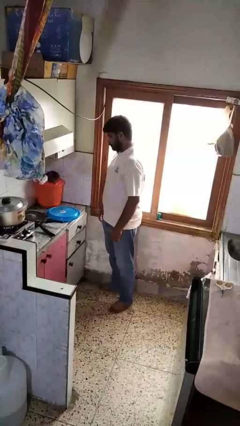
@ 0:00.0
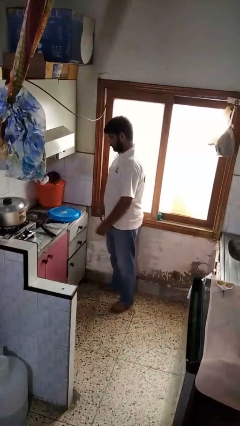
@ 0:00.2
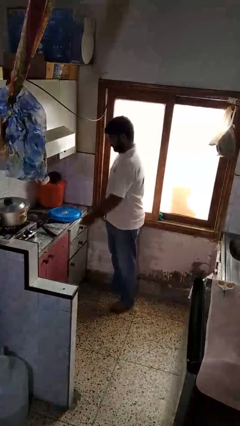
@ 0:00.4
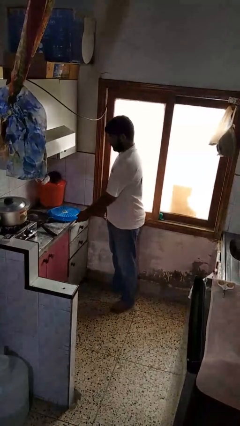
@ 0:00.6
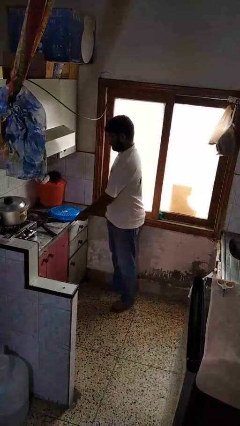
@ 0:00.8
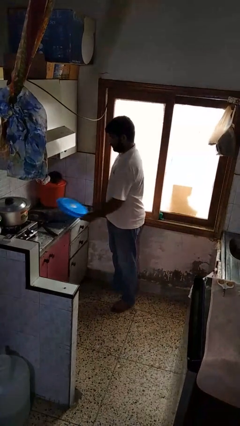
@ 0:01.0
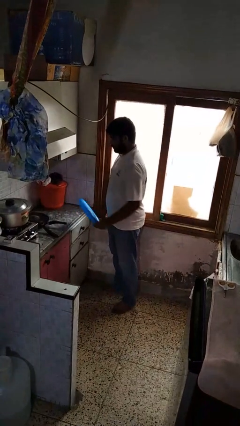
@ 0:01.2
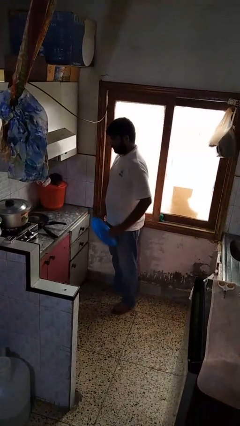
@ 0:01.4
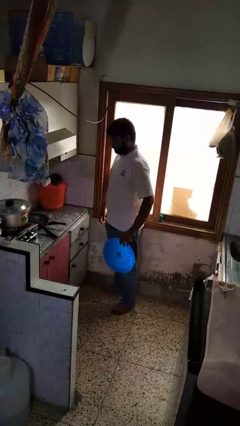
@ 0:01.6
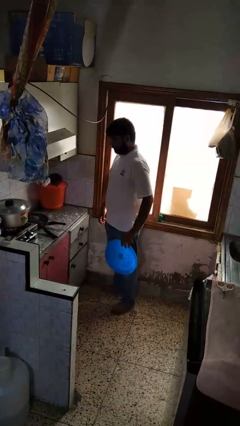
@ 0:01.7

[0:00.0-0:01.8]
person picks up object from countertop

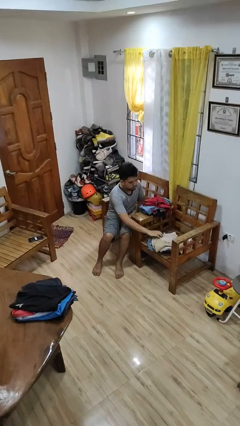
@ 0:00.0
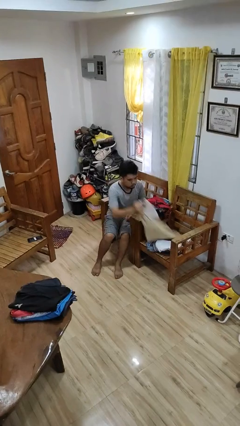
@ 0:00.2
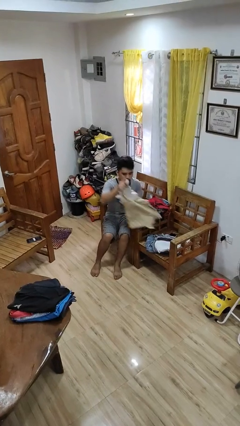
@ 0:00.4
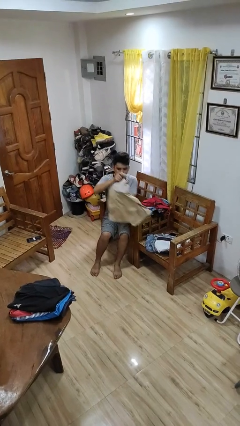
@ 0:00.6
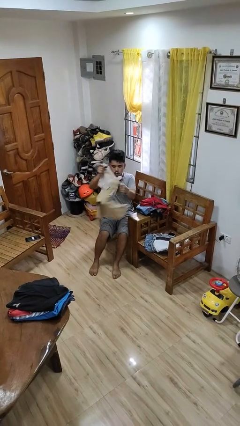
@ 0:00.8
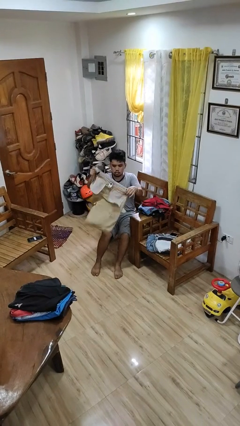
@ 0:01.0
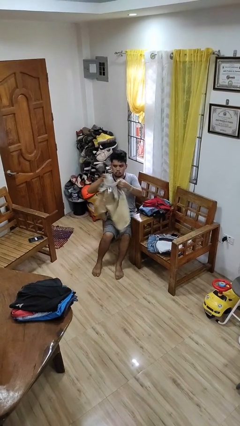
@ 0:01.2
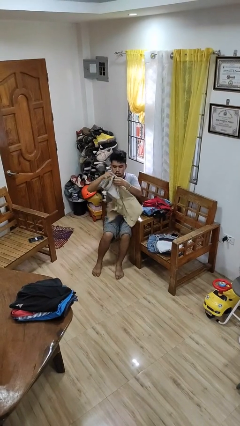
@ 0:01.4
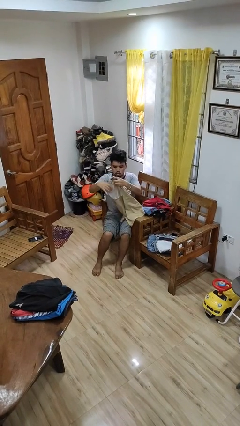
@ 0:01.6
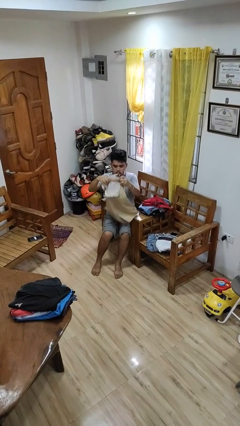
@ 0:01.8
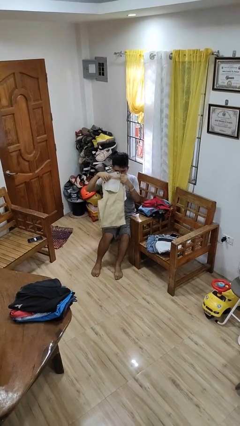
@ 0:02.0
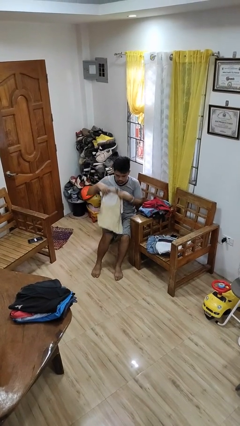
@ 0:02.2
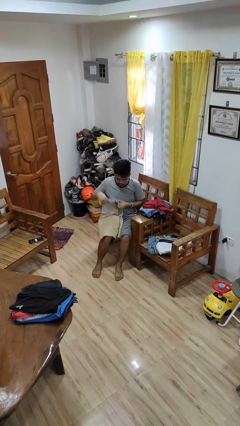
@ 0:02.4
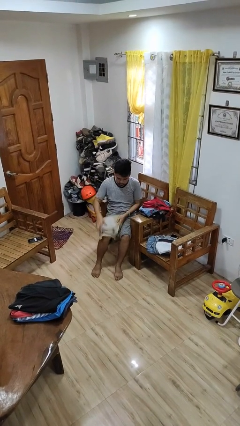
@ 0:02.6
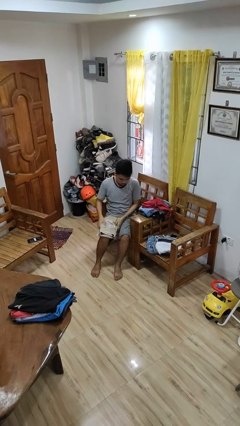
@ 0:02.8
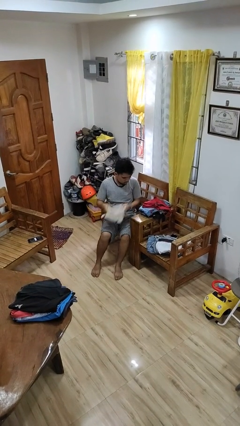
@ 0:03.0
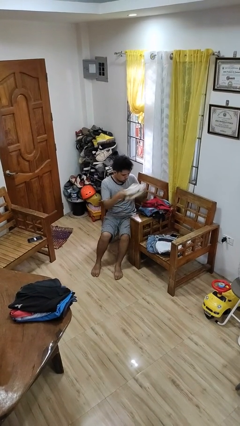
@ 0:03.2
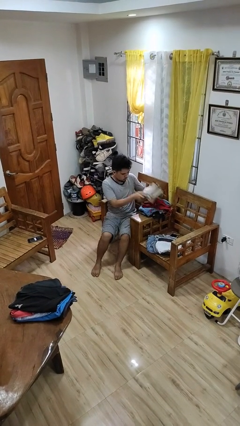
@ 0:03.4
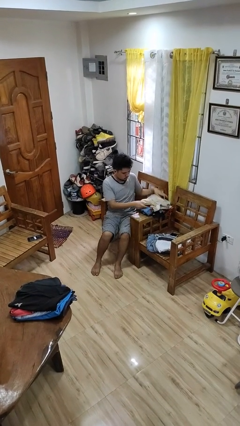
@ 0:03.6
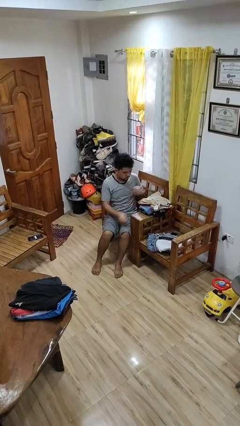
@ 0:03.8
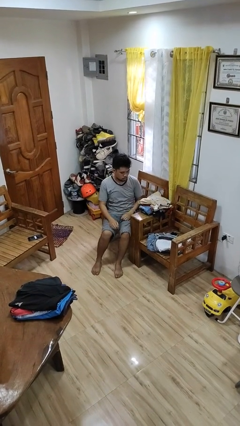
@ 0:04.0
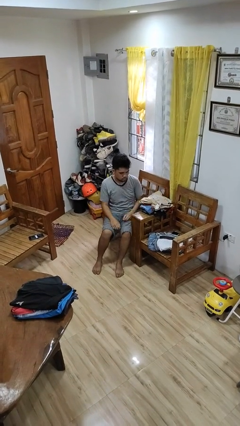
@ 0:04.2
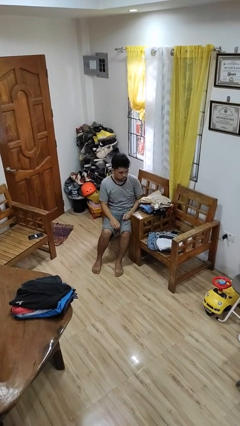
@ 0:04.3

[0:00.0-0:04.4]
person folds pants

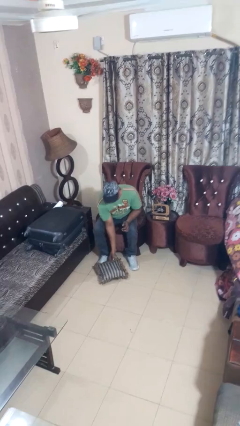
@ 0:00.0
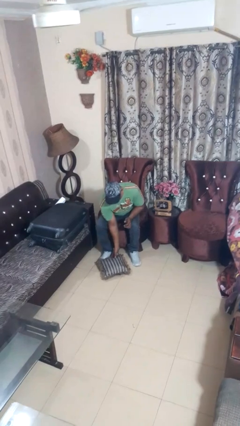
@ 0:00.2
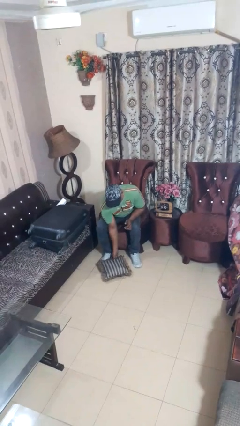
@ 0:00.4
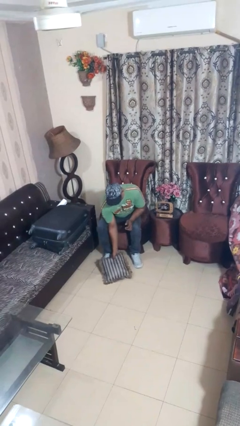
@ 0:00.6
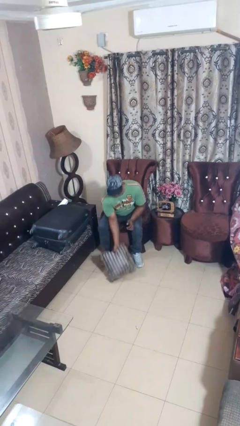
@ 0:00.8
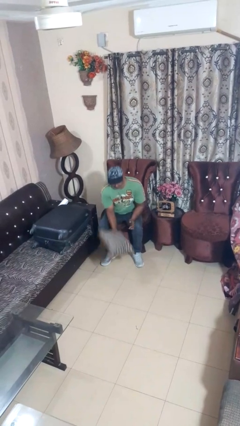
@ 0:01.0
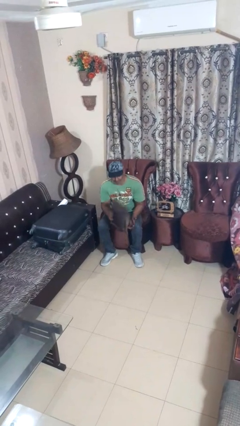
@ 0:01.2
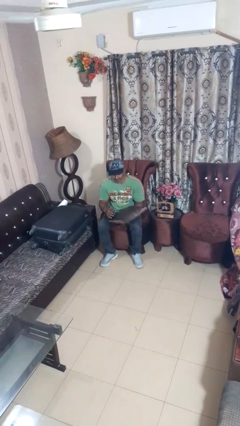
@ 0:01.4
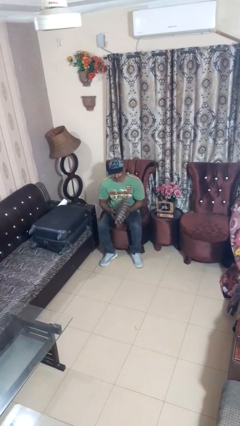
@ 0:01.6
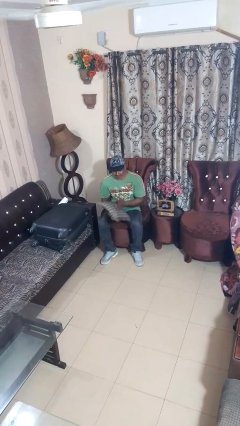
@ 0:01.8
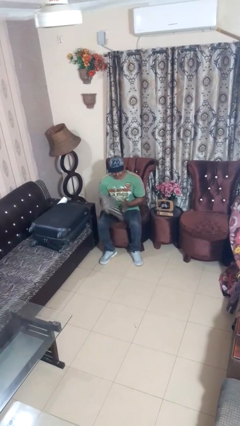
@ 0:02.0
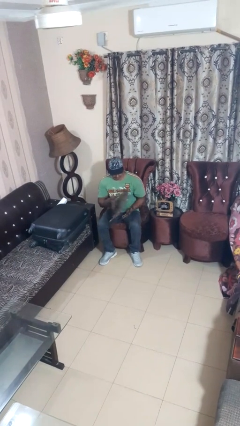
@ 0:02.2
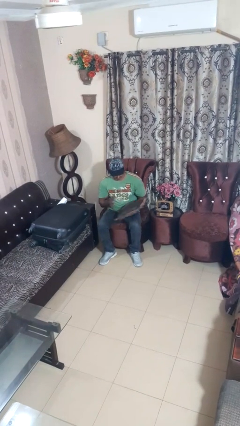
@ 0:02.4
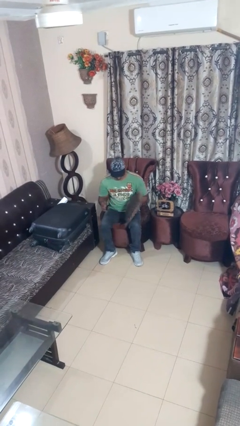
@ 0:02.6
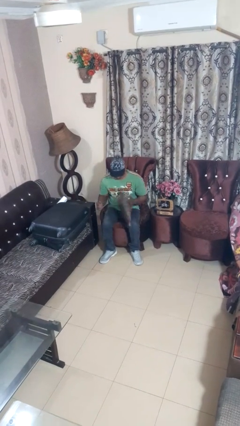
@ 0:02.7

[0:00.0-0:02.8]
person picks up object from floor

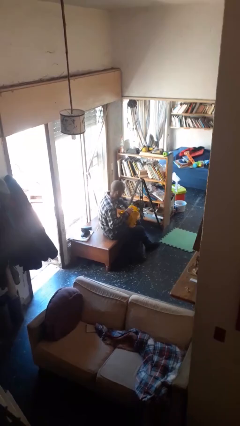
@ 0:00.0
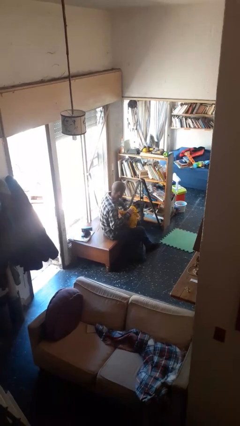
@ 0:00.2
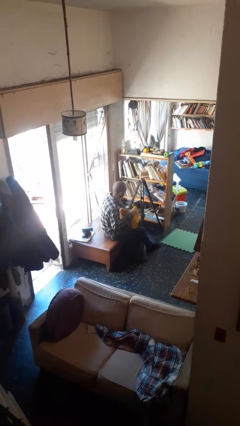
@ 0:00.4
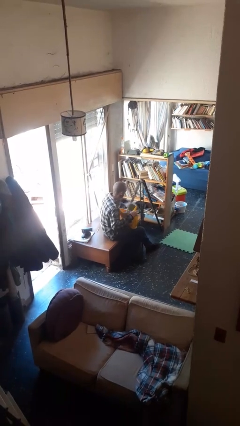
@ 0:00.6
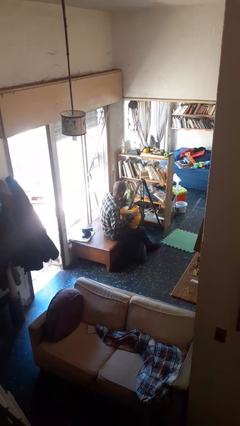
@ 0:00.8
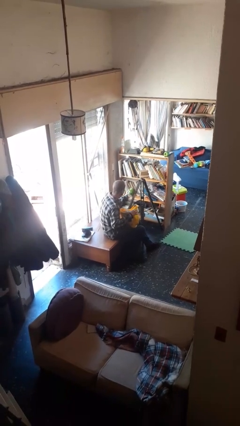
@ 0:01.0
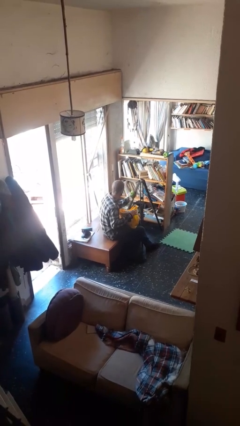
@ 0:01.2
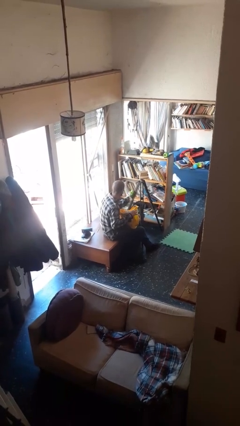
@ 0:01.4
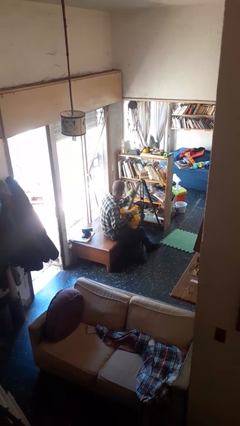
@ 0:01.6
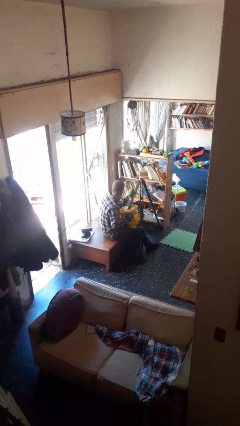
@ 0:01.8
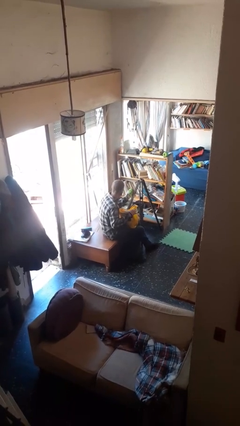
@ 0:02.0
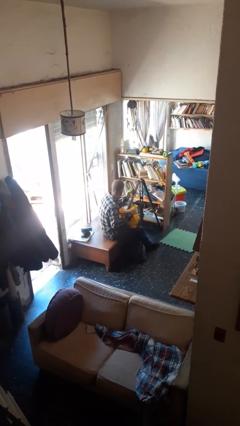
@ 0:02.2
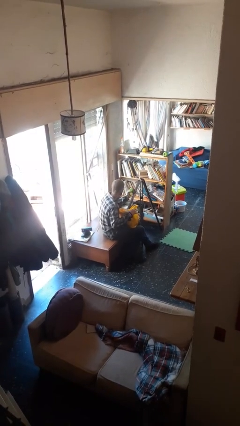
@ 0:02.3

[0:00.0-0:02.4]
person takes object from bag

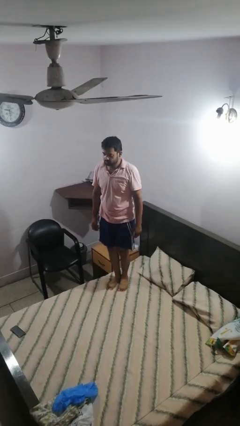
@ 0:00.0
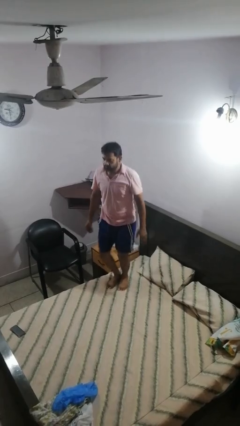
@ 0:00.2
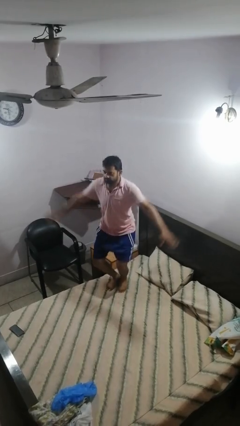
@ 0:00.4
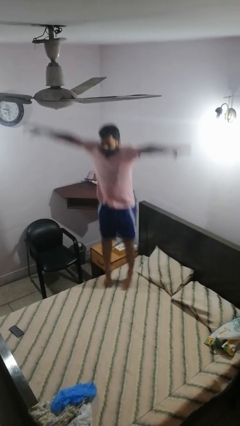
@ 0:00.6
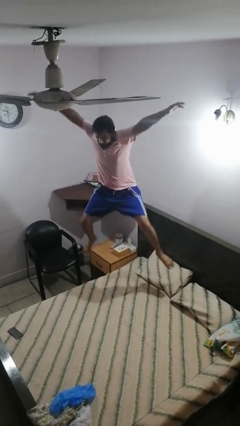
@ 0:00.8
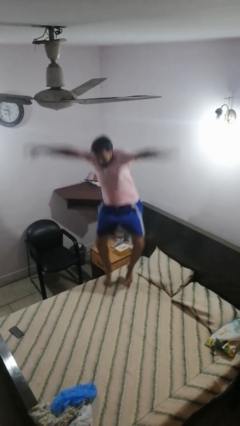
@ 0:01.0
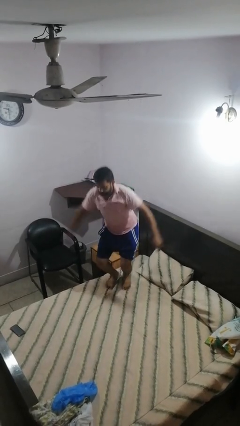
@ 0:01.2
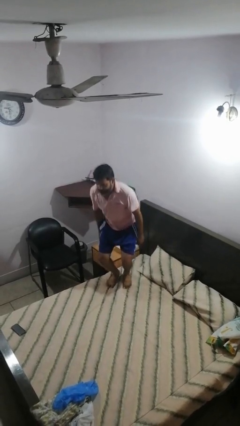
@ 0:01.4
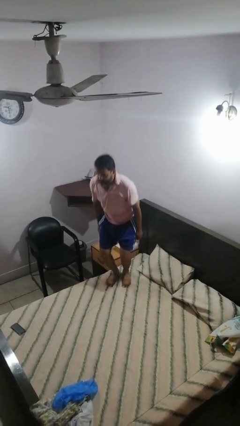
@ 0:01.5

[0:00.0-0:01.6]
person jumps on bed

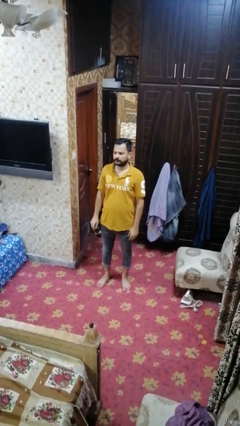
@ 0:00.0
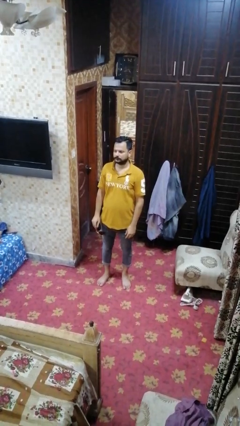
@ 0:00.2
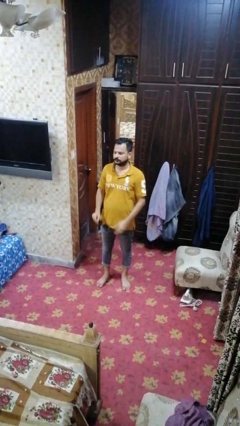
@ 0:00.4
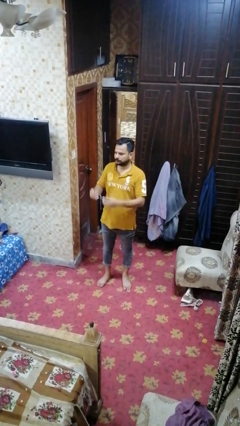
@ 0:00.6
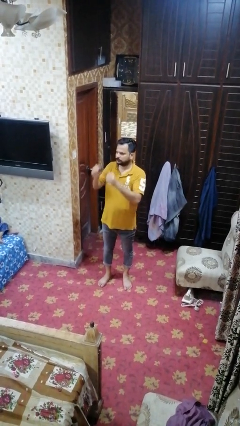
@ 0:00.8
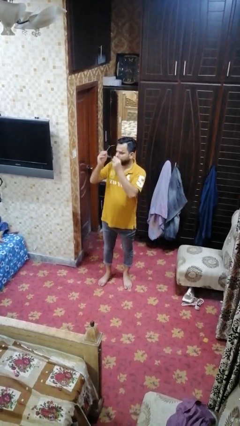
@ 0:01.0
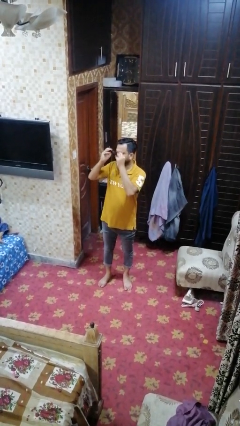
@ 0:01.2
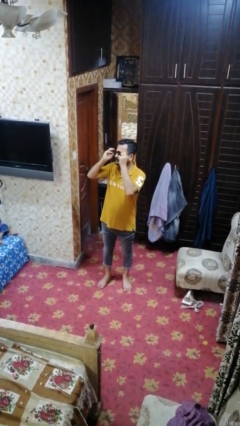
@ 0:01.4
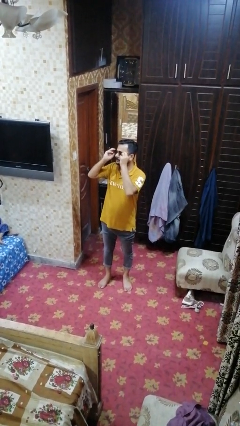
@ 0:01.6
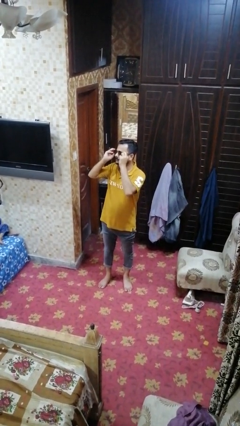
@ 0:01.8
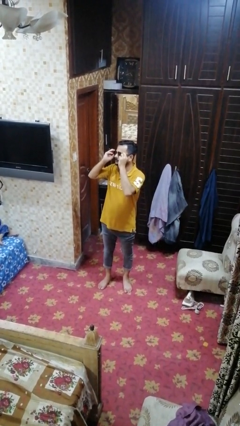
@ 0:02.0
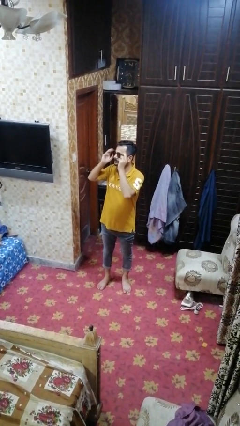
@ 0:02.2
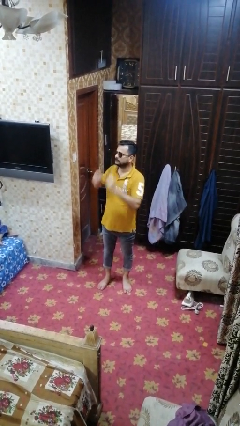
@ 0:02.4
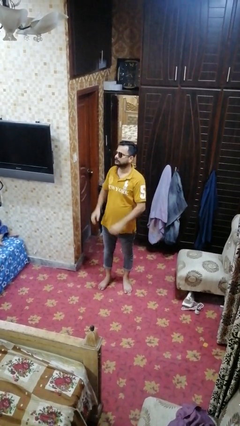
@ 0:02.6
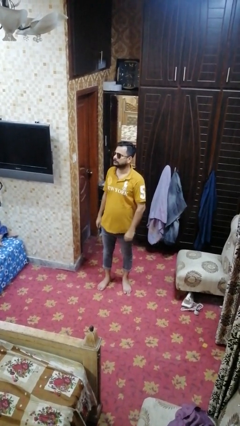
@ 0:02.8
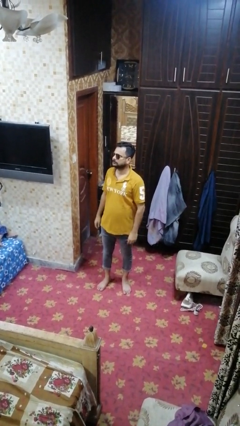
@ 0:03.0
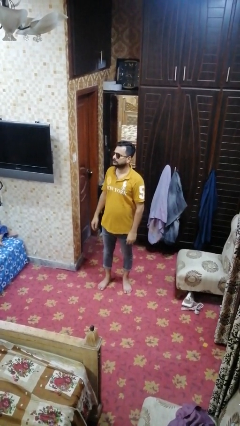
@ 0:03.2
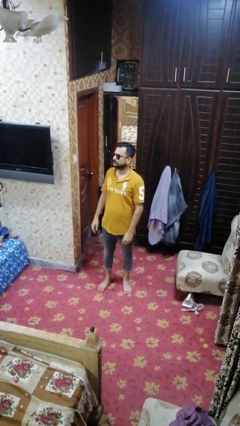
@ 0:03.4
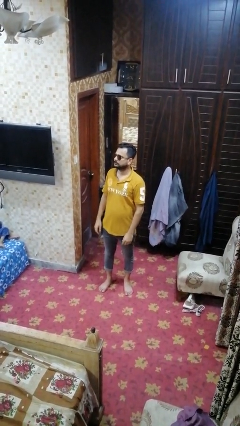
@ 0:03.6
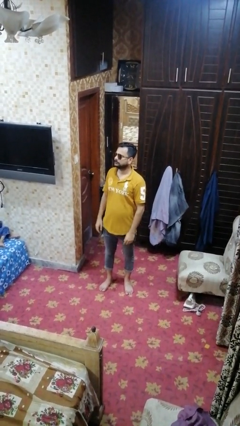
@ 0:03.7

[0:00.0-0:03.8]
person puts on sunglasses
